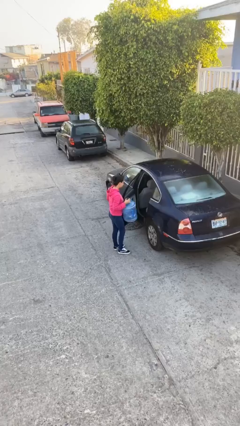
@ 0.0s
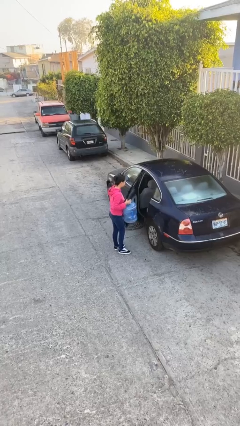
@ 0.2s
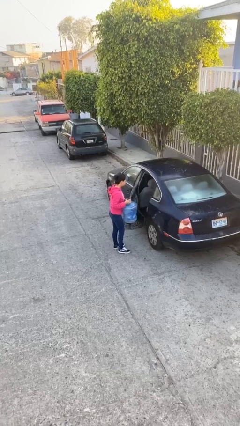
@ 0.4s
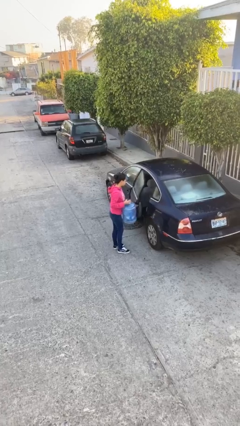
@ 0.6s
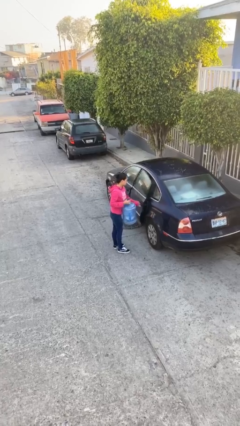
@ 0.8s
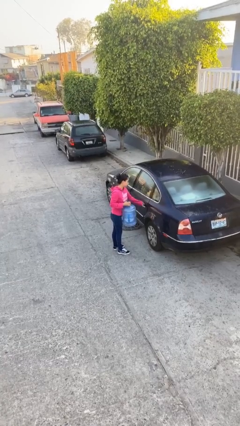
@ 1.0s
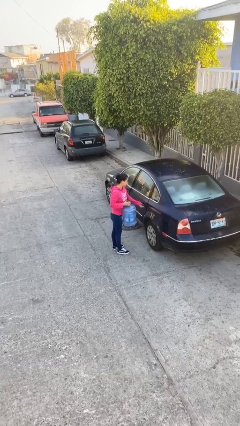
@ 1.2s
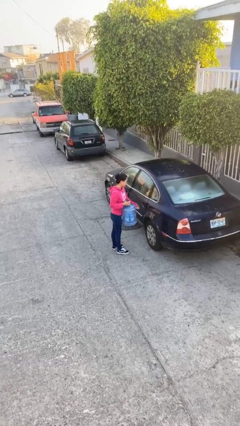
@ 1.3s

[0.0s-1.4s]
person closes car door

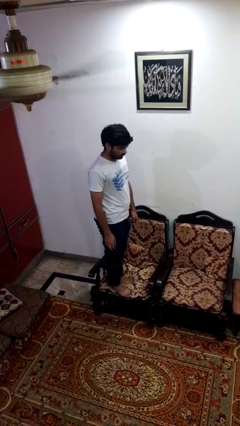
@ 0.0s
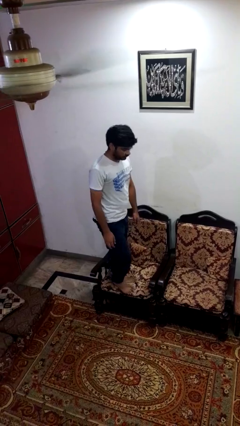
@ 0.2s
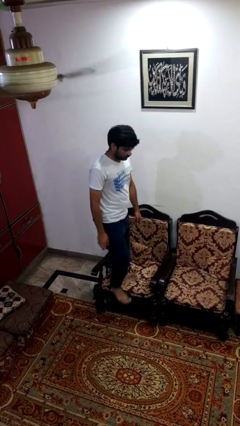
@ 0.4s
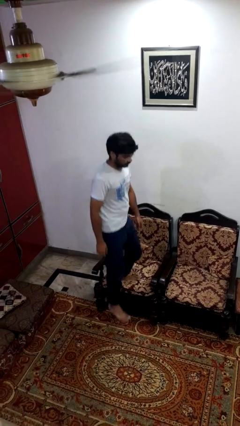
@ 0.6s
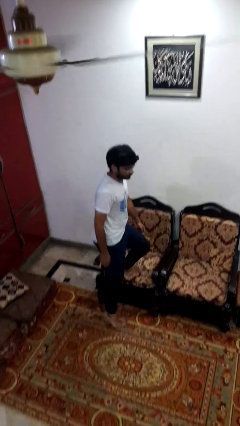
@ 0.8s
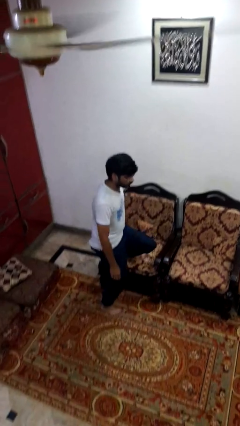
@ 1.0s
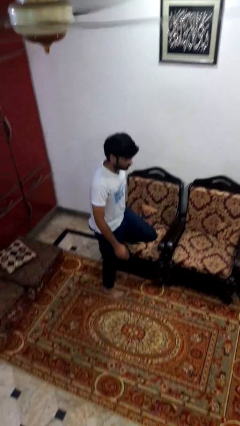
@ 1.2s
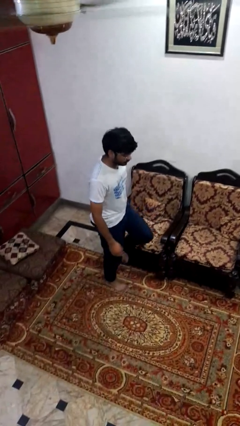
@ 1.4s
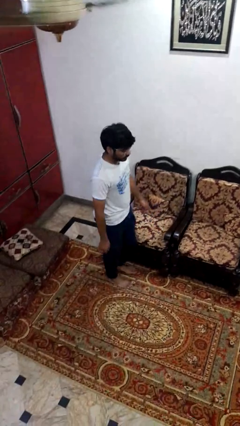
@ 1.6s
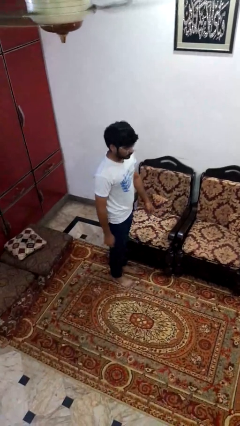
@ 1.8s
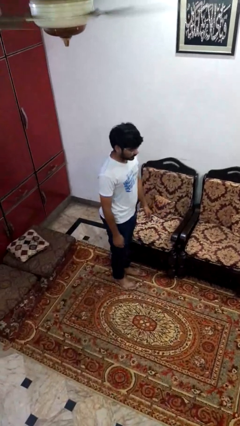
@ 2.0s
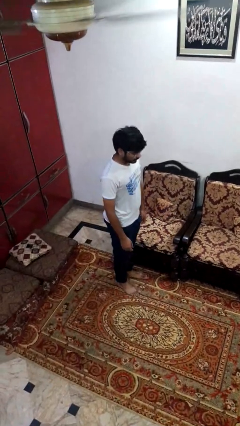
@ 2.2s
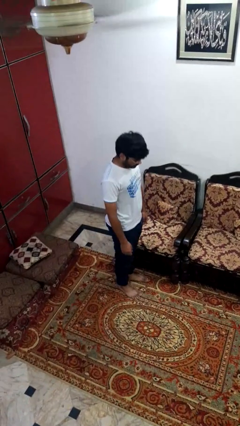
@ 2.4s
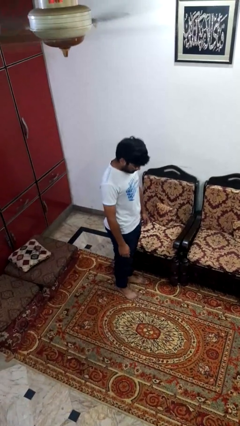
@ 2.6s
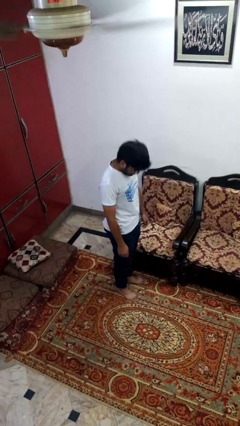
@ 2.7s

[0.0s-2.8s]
person climbs off couch

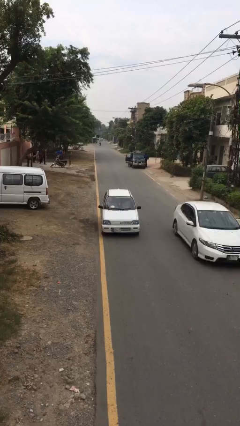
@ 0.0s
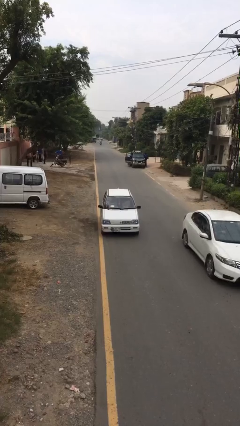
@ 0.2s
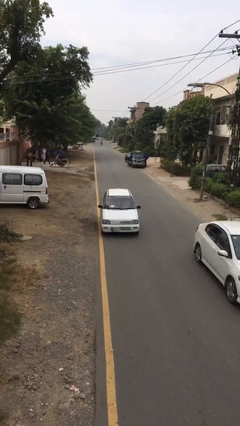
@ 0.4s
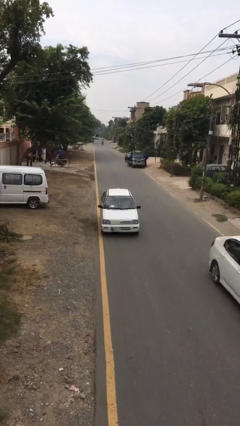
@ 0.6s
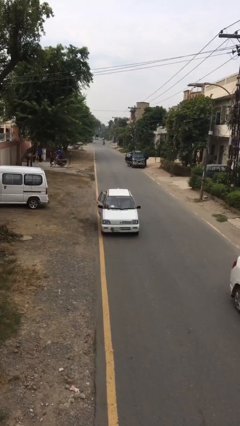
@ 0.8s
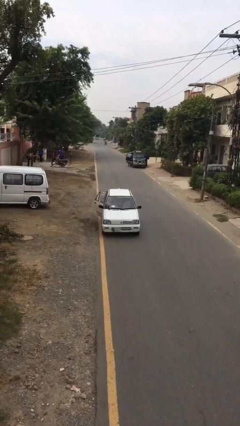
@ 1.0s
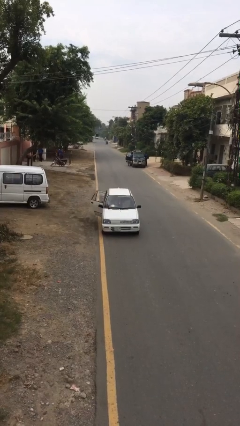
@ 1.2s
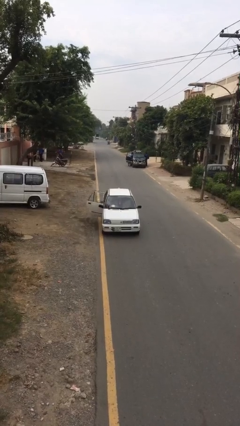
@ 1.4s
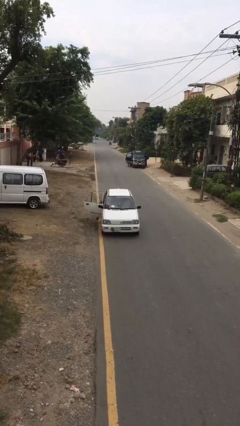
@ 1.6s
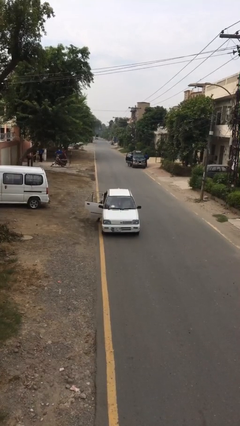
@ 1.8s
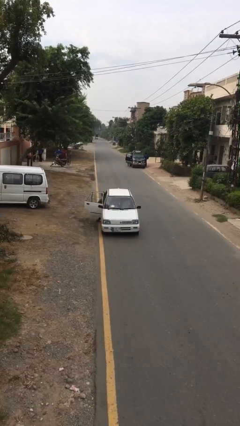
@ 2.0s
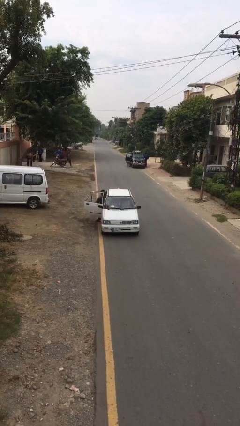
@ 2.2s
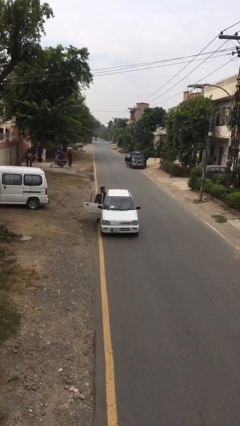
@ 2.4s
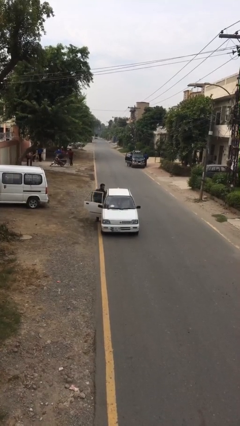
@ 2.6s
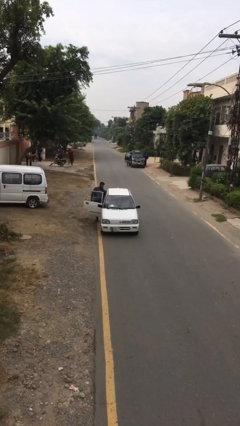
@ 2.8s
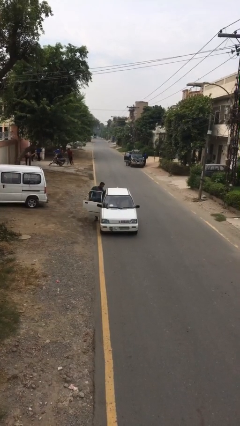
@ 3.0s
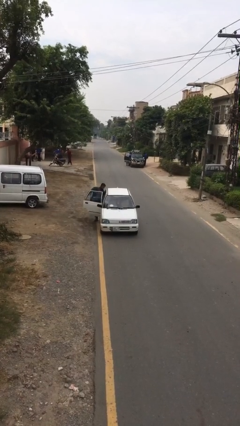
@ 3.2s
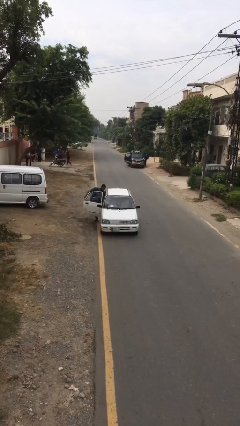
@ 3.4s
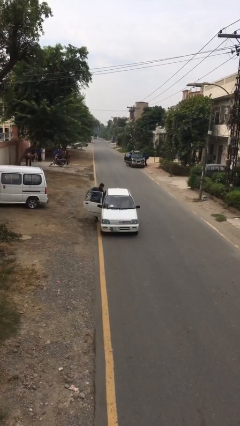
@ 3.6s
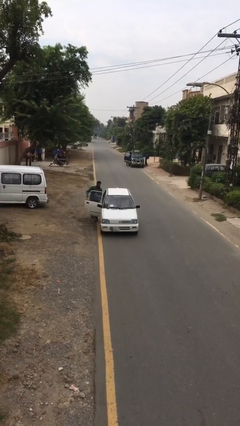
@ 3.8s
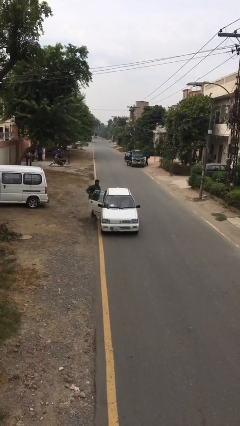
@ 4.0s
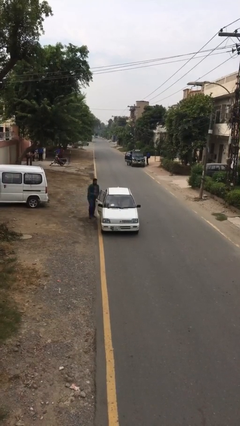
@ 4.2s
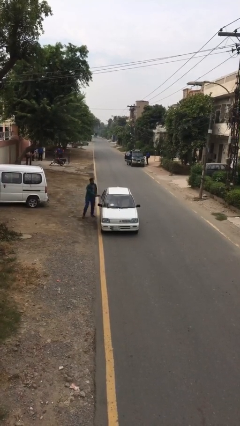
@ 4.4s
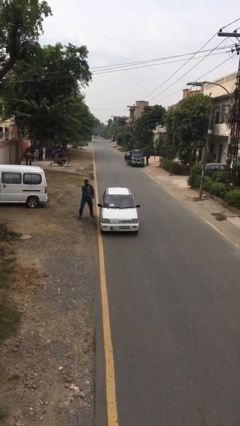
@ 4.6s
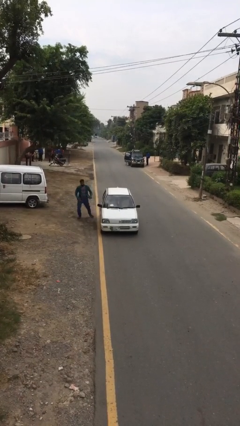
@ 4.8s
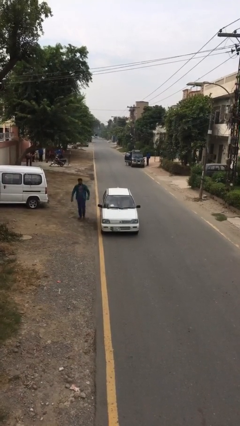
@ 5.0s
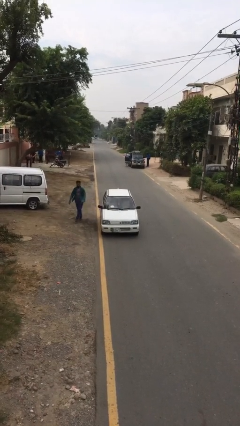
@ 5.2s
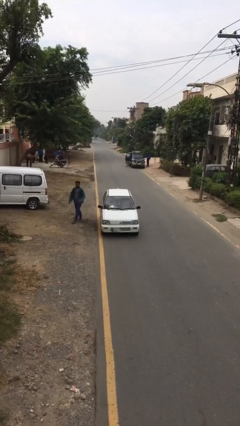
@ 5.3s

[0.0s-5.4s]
car drops off person

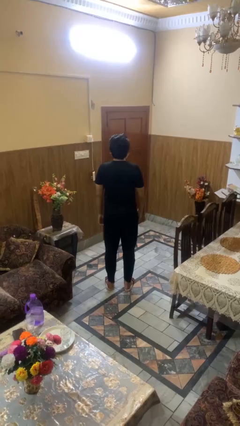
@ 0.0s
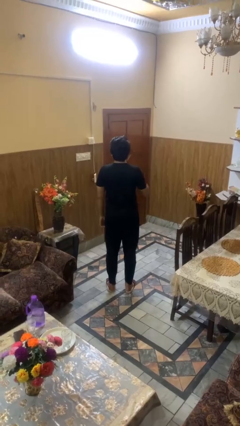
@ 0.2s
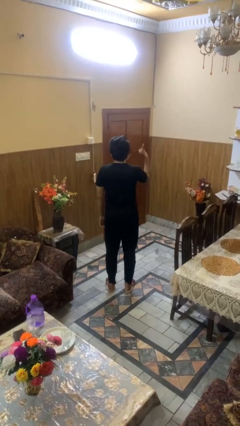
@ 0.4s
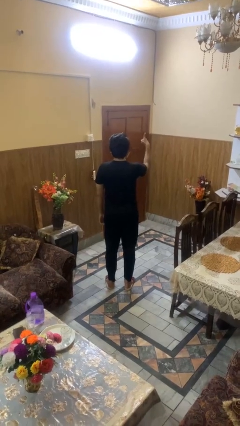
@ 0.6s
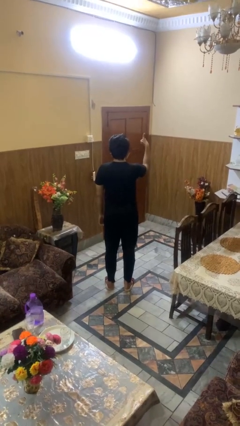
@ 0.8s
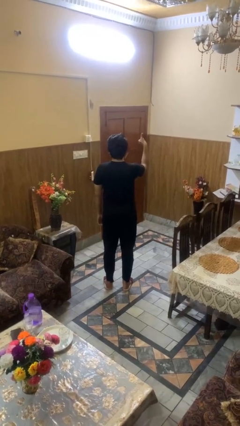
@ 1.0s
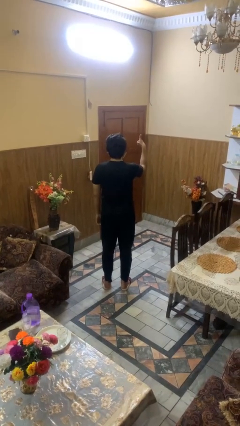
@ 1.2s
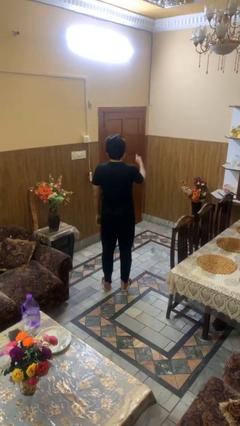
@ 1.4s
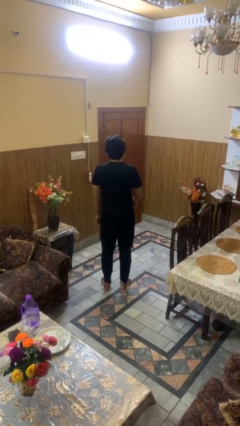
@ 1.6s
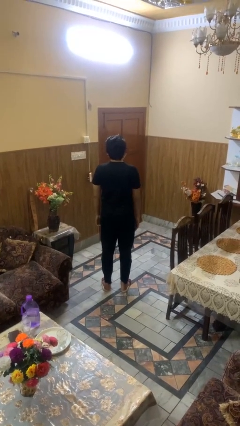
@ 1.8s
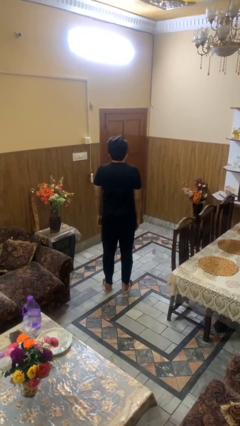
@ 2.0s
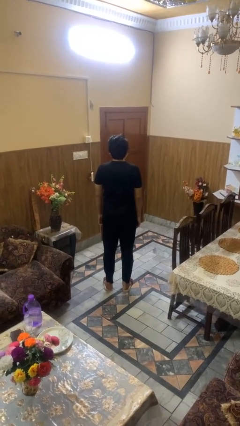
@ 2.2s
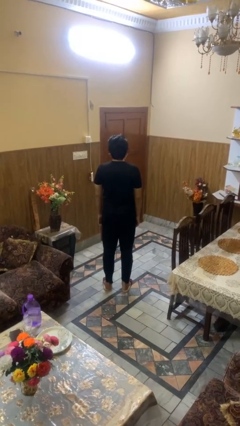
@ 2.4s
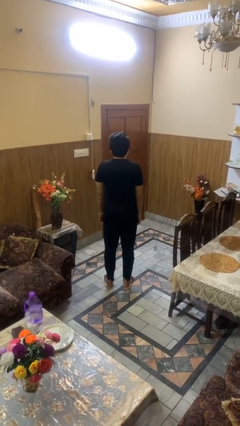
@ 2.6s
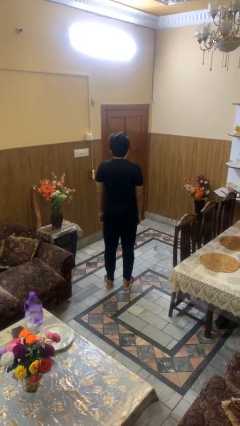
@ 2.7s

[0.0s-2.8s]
person gestures thumbs up

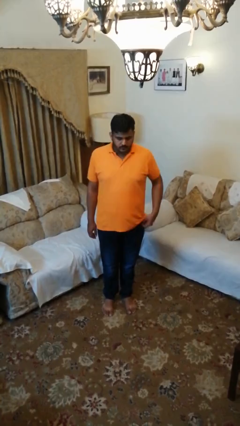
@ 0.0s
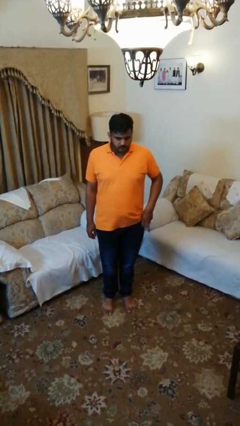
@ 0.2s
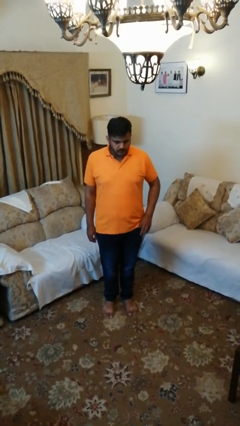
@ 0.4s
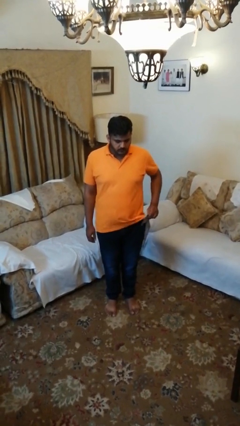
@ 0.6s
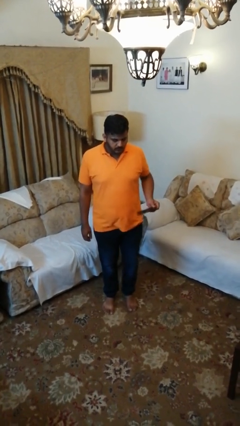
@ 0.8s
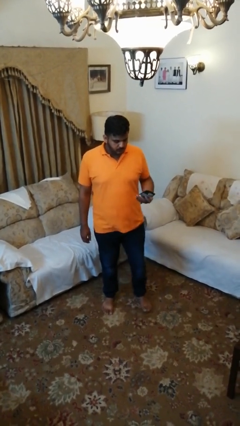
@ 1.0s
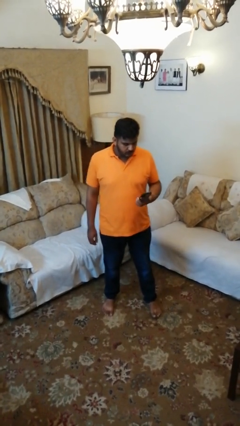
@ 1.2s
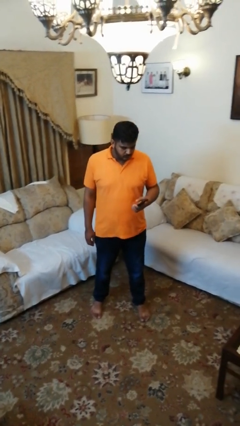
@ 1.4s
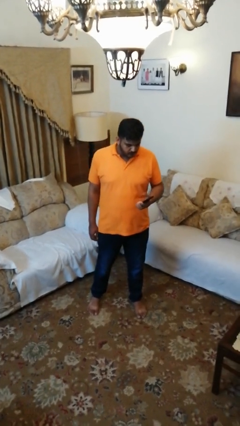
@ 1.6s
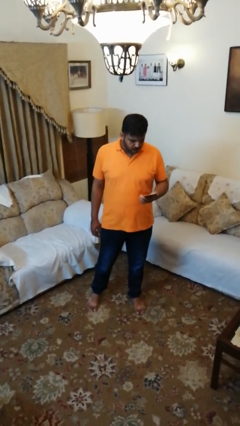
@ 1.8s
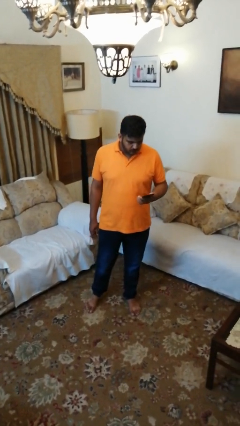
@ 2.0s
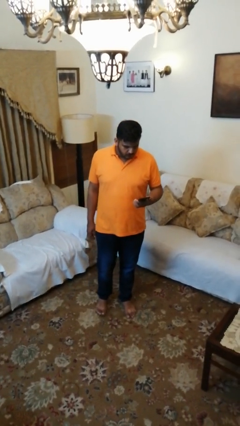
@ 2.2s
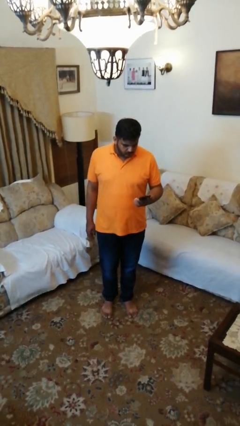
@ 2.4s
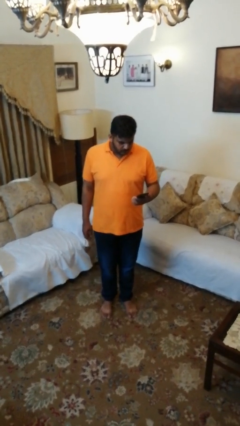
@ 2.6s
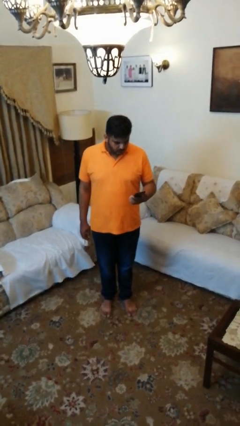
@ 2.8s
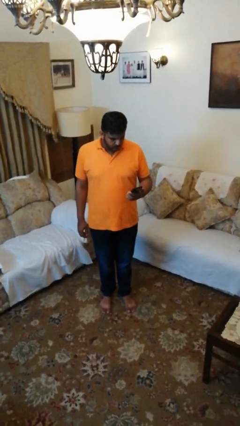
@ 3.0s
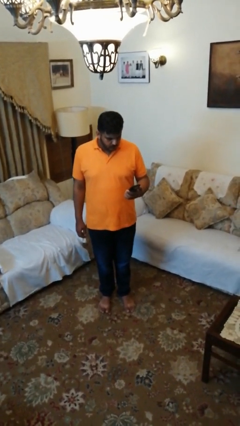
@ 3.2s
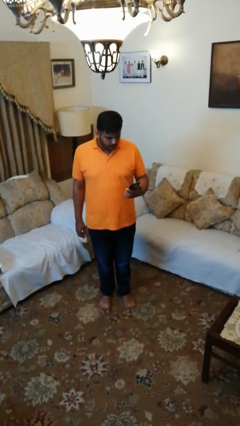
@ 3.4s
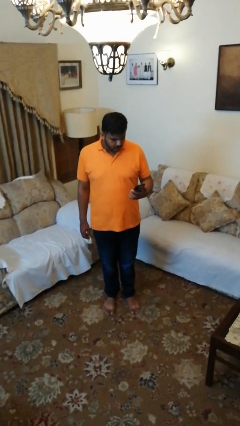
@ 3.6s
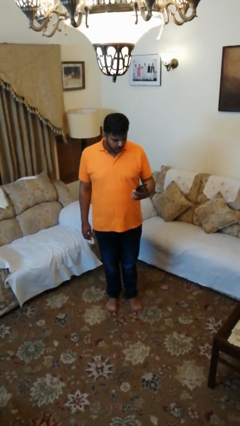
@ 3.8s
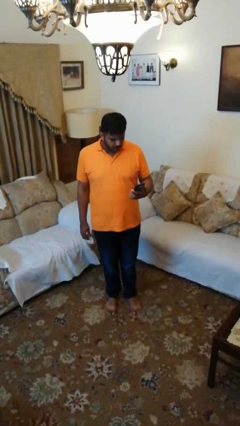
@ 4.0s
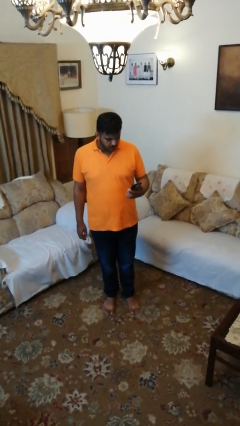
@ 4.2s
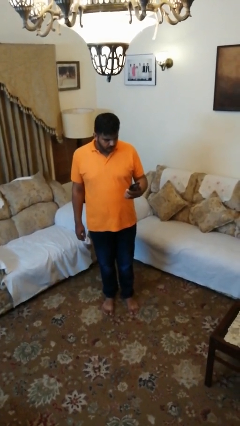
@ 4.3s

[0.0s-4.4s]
person takes phone from pocket

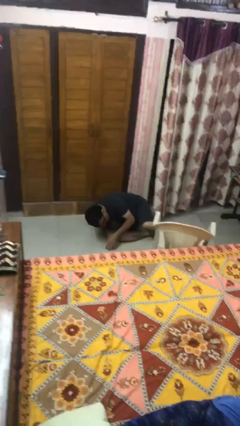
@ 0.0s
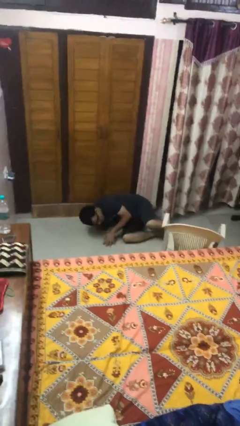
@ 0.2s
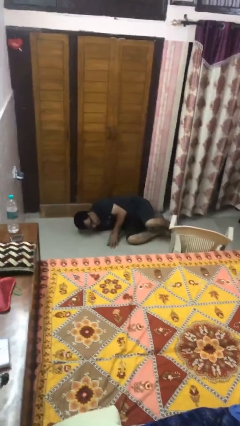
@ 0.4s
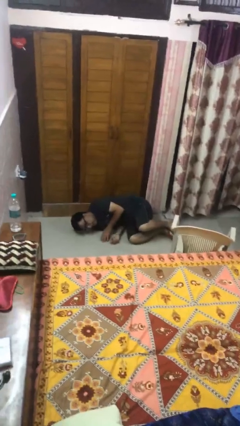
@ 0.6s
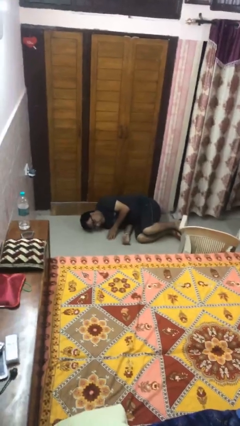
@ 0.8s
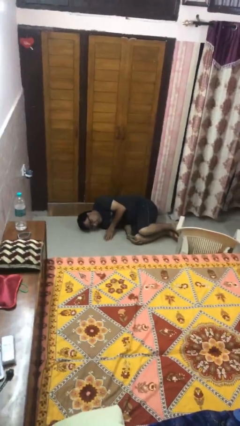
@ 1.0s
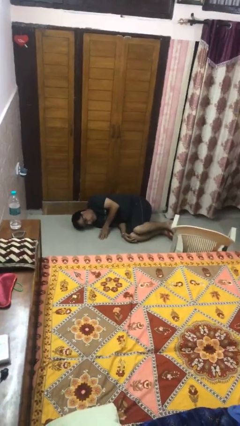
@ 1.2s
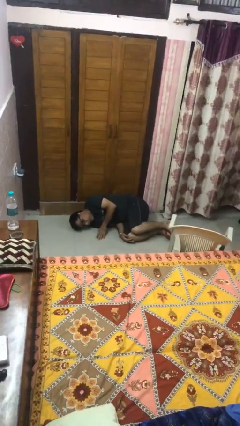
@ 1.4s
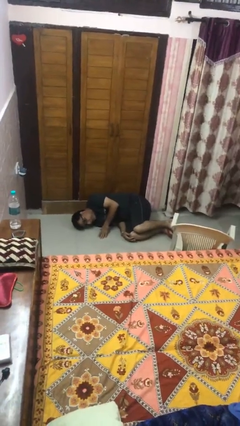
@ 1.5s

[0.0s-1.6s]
person lies down on floor
